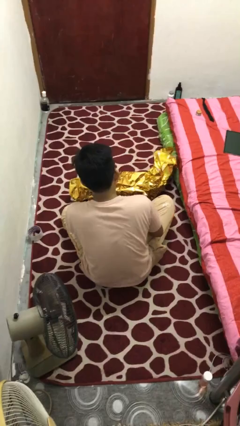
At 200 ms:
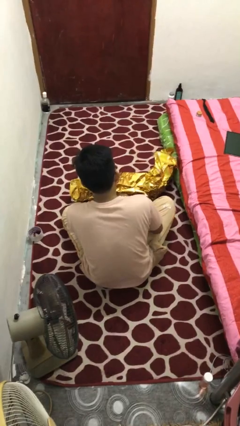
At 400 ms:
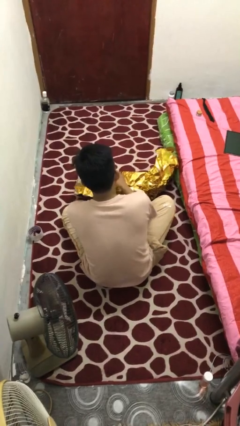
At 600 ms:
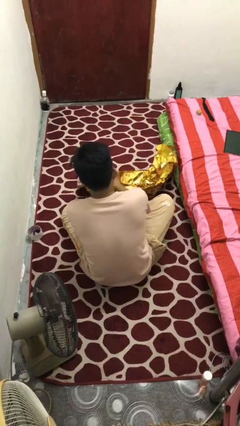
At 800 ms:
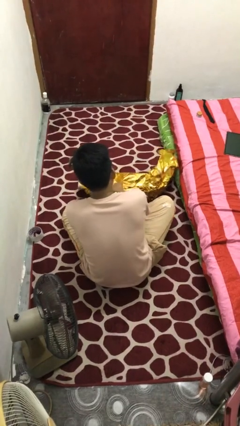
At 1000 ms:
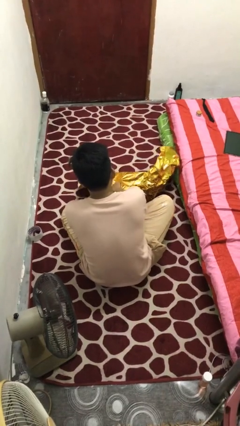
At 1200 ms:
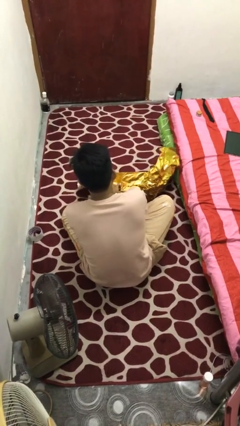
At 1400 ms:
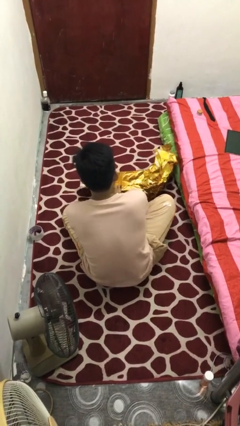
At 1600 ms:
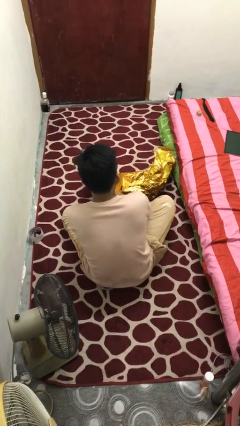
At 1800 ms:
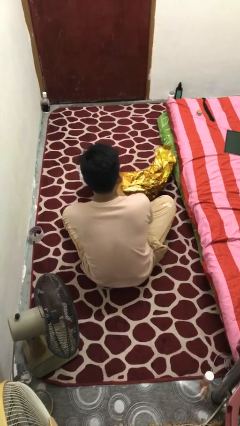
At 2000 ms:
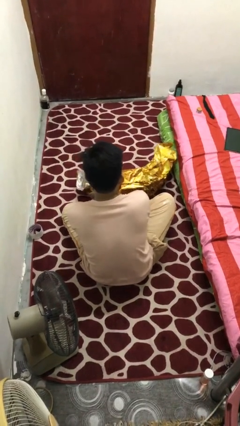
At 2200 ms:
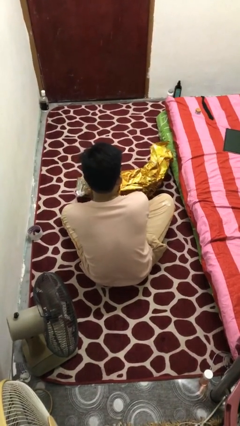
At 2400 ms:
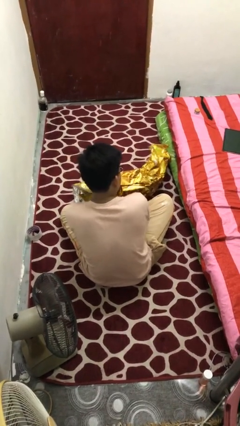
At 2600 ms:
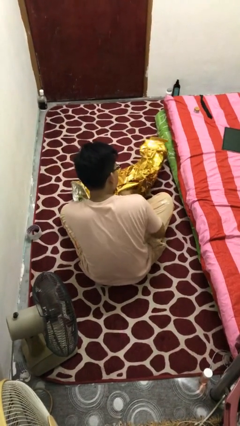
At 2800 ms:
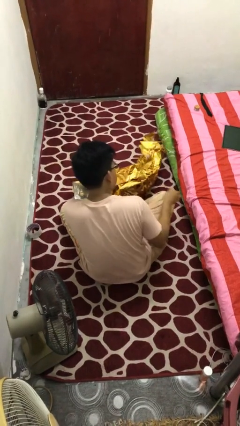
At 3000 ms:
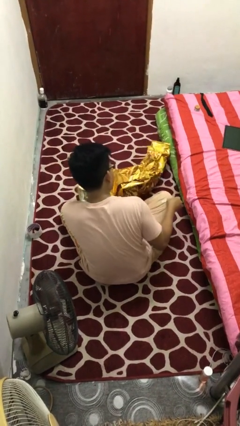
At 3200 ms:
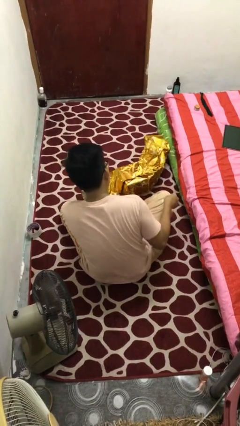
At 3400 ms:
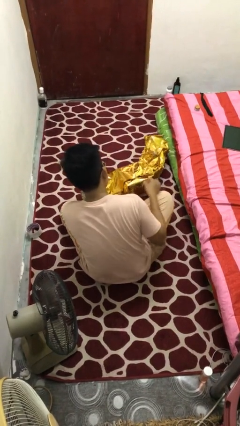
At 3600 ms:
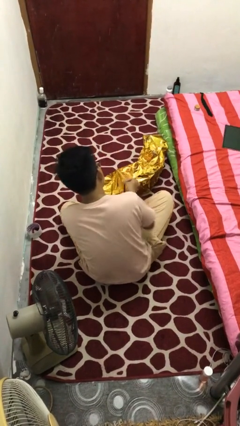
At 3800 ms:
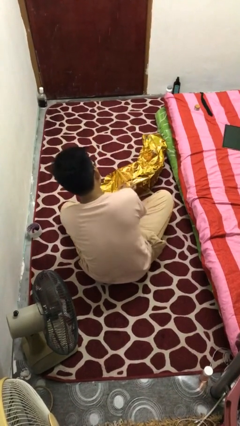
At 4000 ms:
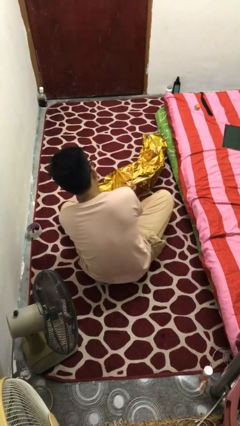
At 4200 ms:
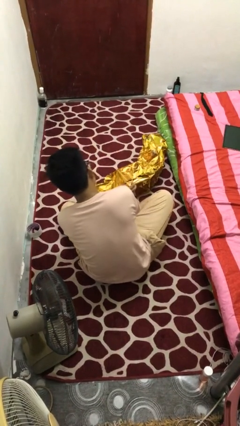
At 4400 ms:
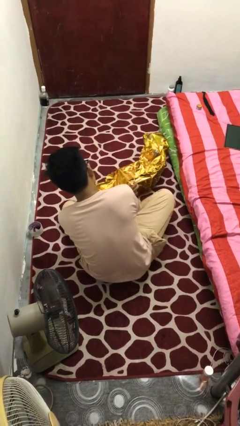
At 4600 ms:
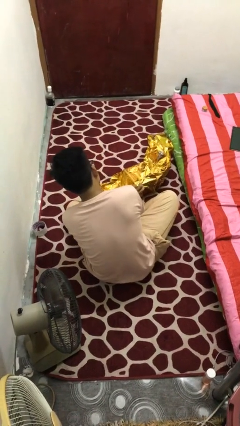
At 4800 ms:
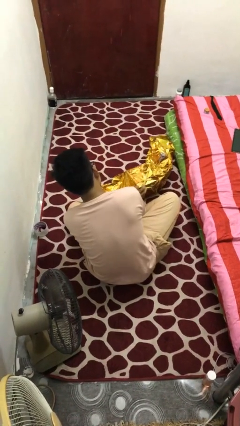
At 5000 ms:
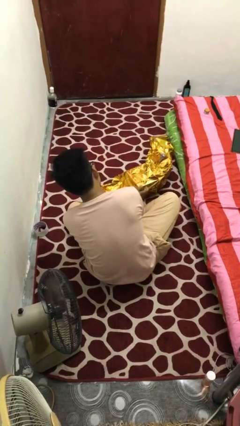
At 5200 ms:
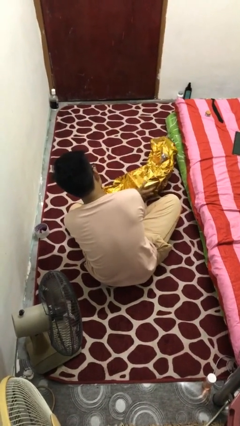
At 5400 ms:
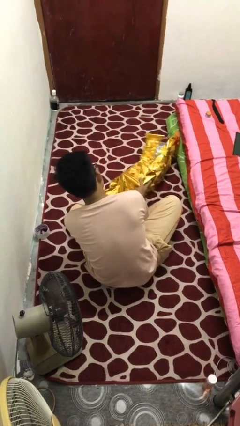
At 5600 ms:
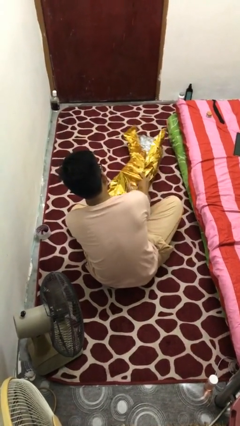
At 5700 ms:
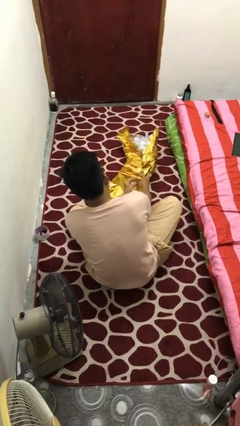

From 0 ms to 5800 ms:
person wraps box

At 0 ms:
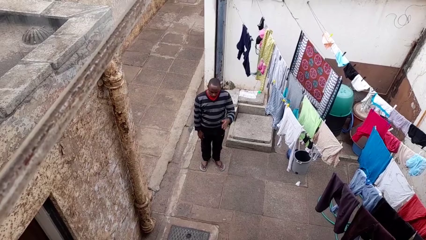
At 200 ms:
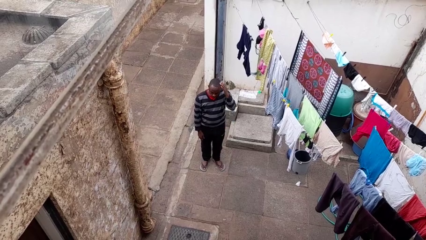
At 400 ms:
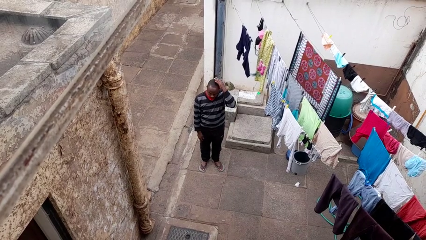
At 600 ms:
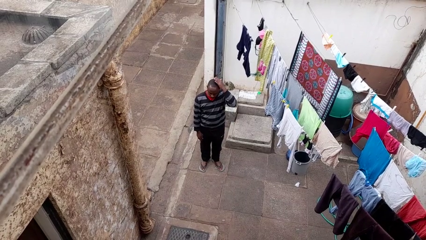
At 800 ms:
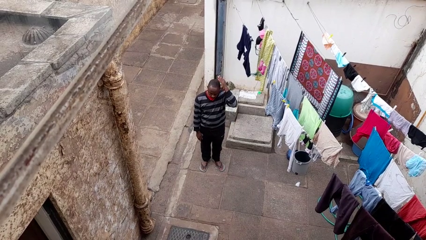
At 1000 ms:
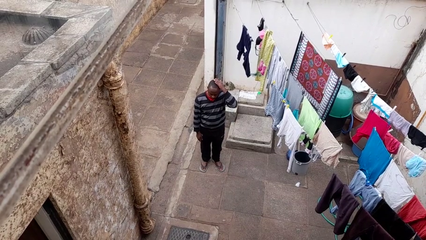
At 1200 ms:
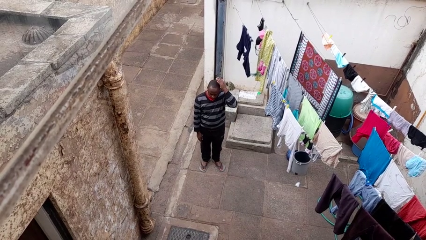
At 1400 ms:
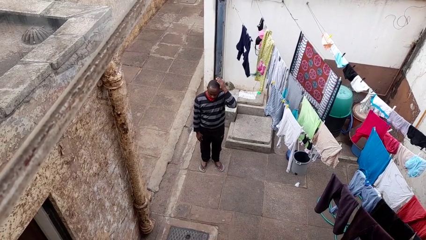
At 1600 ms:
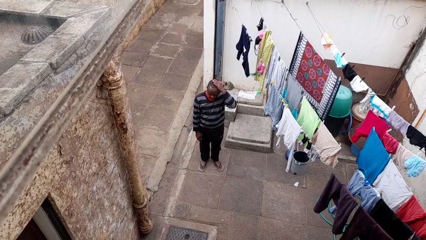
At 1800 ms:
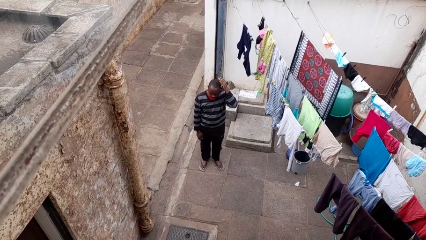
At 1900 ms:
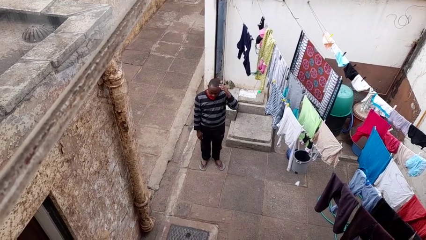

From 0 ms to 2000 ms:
person pats head

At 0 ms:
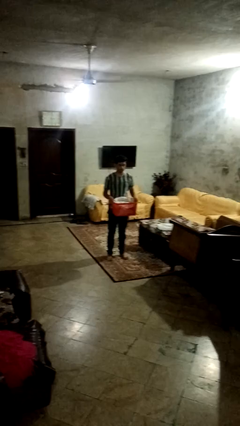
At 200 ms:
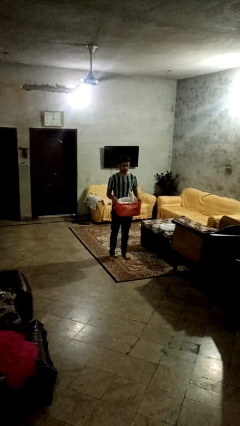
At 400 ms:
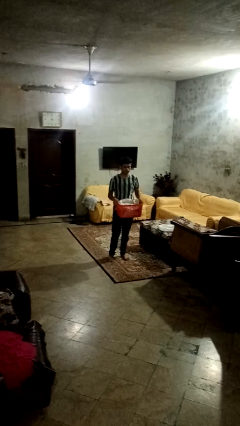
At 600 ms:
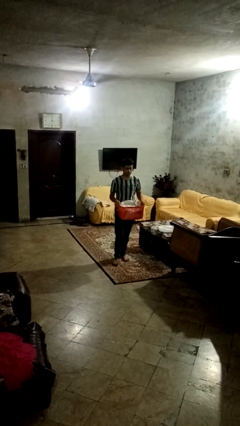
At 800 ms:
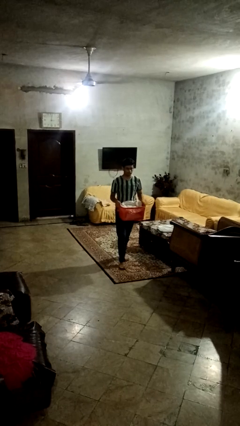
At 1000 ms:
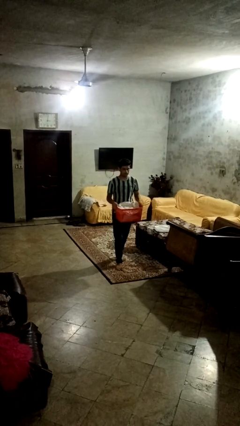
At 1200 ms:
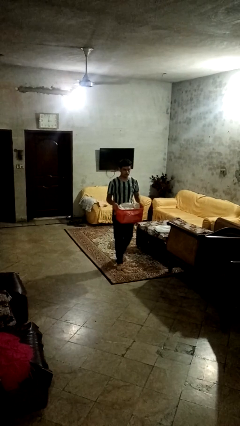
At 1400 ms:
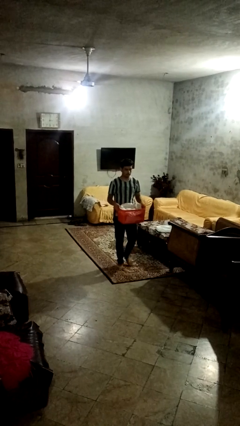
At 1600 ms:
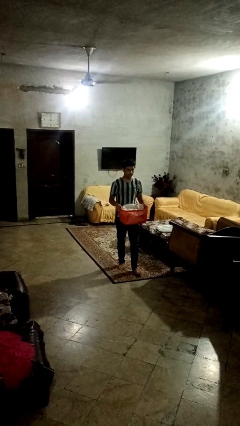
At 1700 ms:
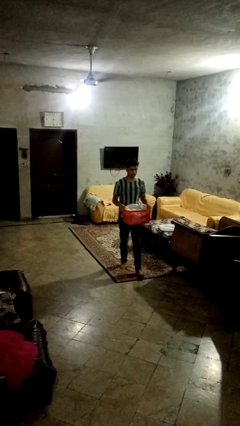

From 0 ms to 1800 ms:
person carries laundry basket

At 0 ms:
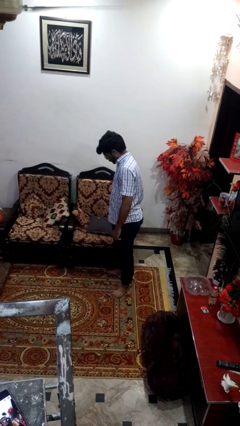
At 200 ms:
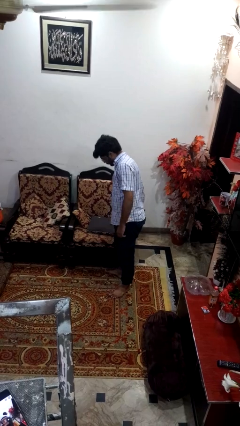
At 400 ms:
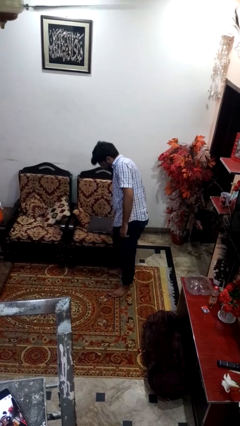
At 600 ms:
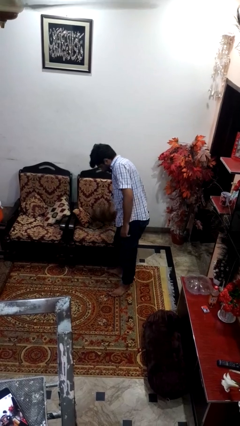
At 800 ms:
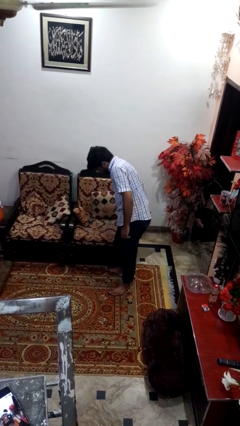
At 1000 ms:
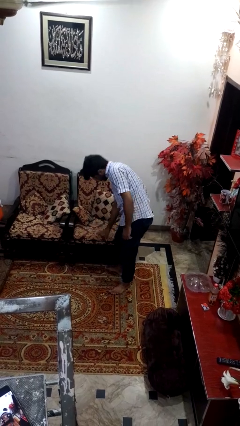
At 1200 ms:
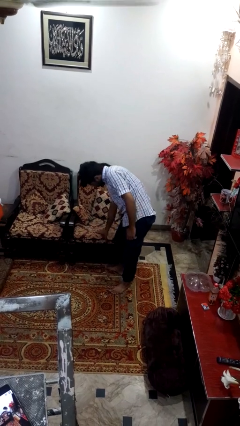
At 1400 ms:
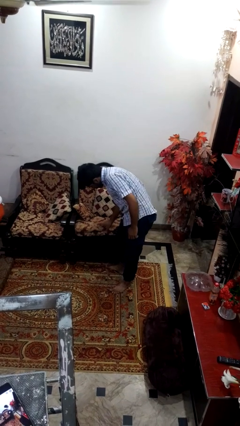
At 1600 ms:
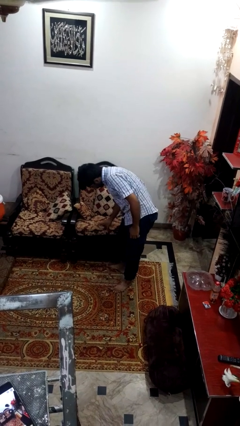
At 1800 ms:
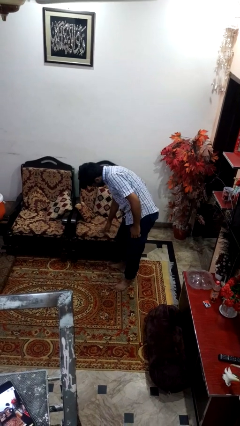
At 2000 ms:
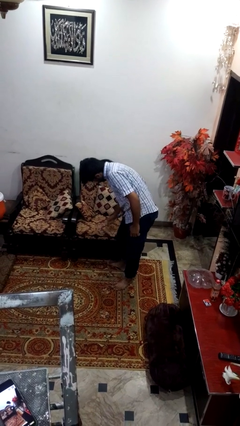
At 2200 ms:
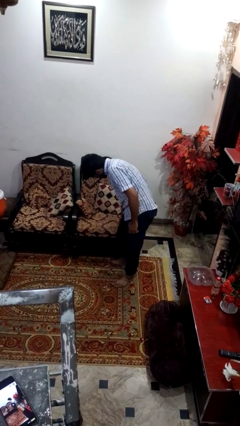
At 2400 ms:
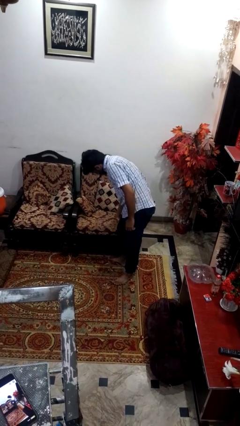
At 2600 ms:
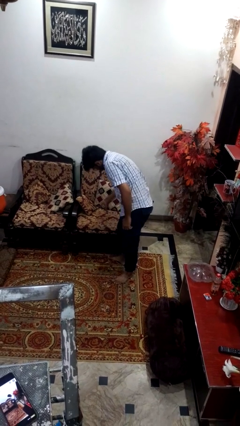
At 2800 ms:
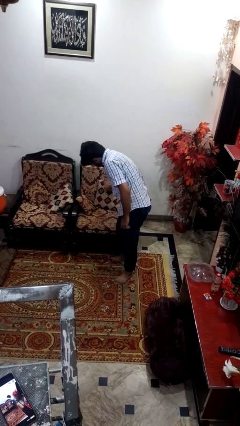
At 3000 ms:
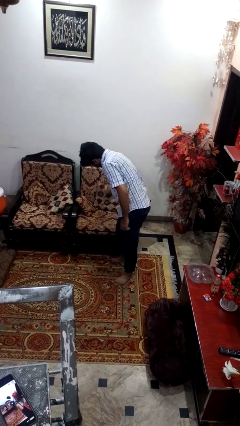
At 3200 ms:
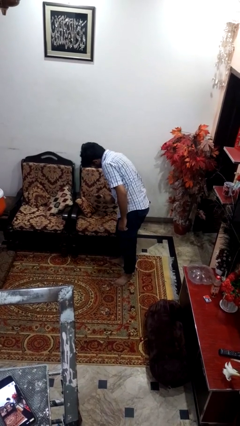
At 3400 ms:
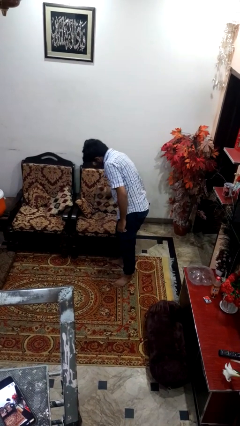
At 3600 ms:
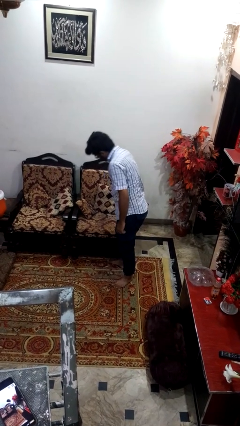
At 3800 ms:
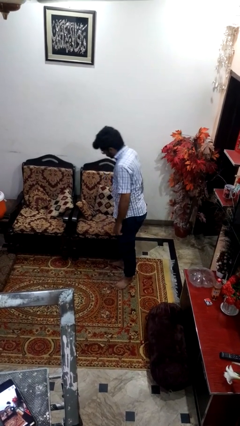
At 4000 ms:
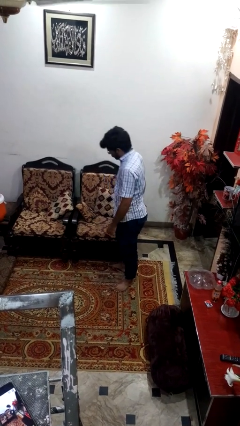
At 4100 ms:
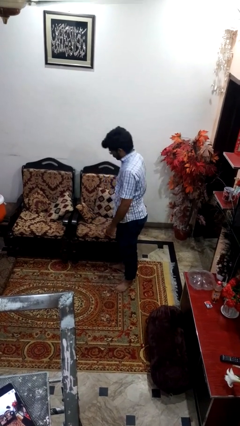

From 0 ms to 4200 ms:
person searches in couch

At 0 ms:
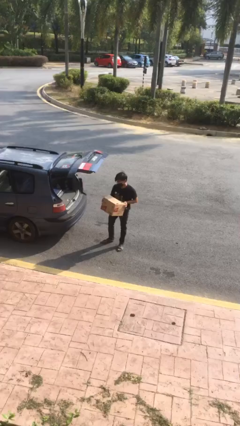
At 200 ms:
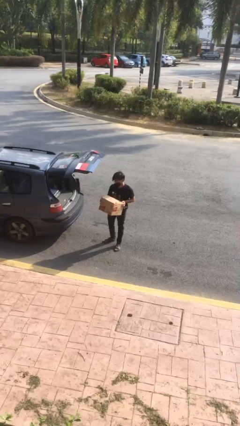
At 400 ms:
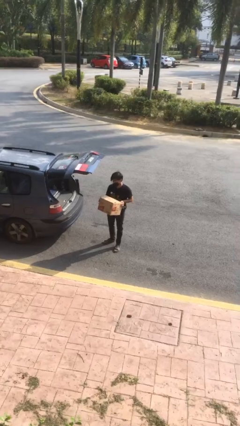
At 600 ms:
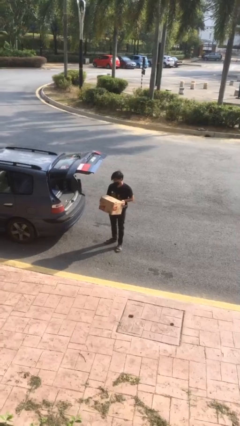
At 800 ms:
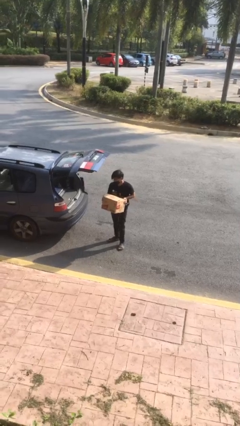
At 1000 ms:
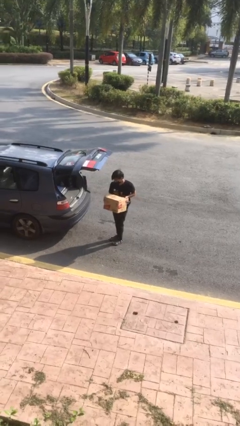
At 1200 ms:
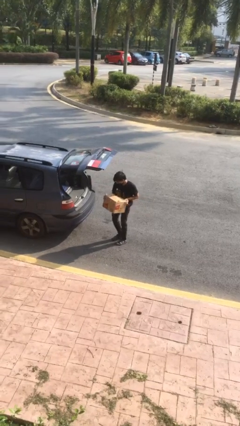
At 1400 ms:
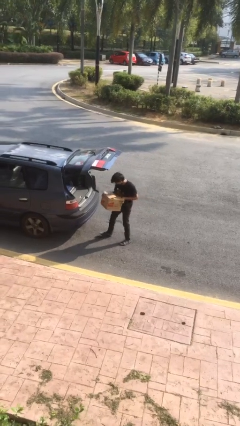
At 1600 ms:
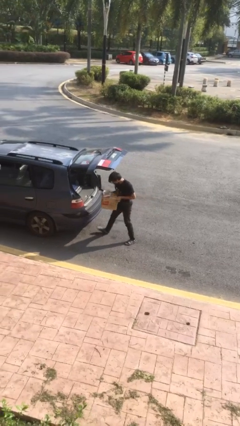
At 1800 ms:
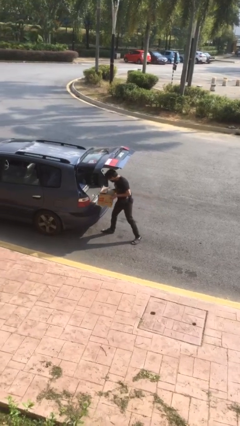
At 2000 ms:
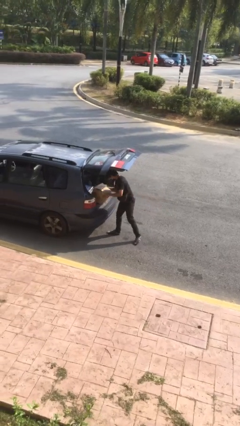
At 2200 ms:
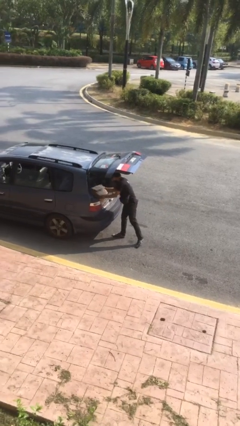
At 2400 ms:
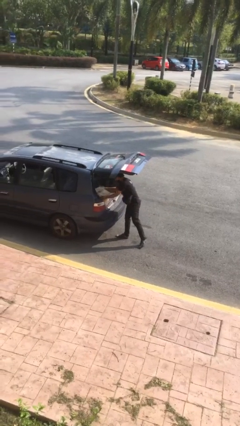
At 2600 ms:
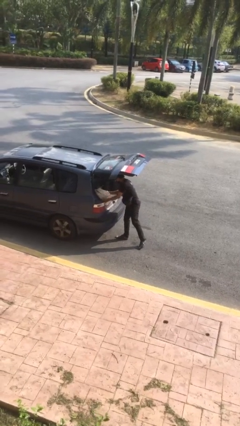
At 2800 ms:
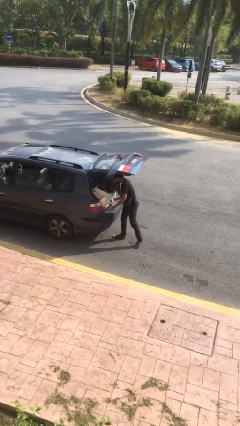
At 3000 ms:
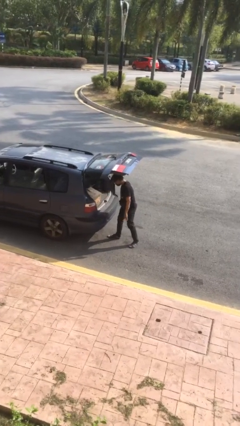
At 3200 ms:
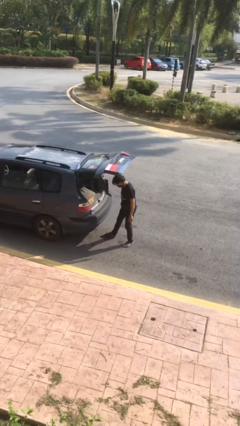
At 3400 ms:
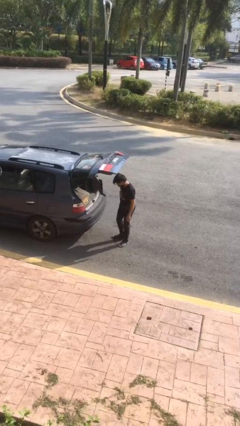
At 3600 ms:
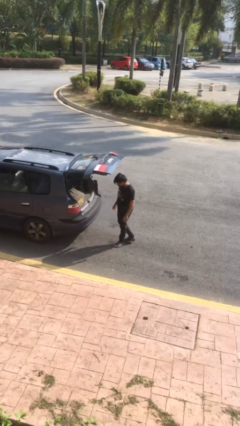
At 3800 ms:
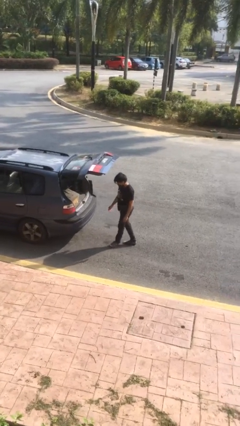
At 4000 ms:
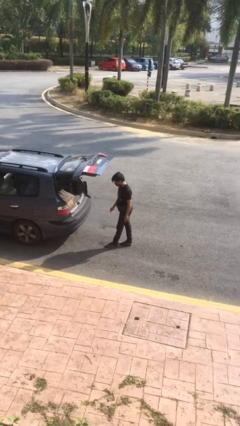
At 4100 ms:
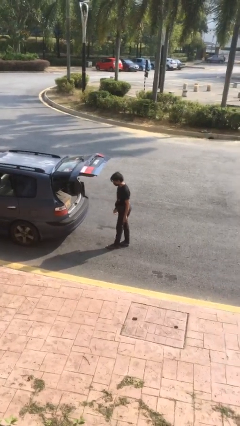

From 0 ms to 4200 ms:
person loads car
